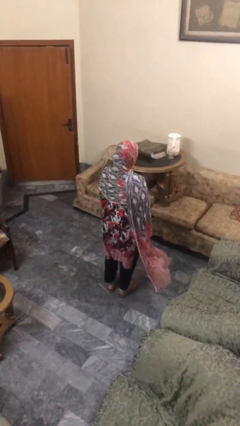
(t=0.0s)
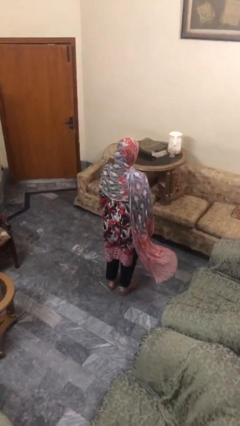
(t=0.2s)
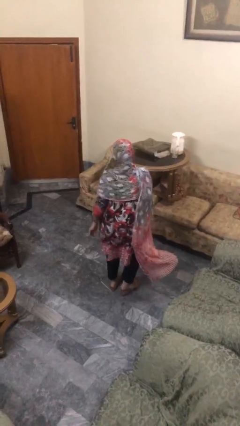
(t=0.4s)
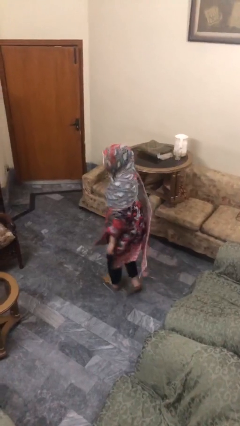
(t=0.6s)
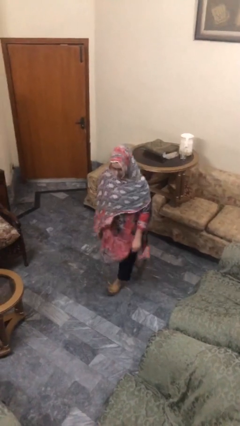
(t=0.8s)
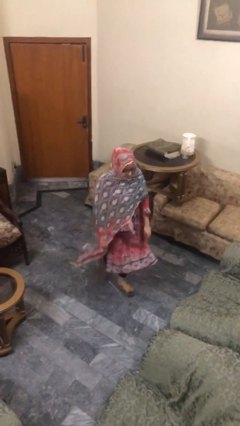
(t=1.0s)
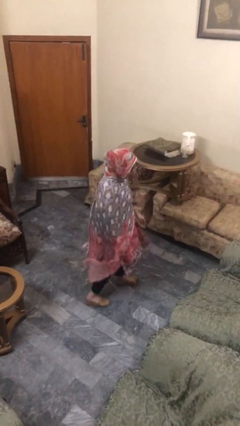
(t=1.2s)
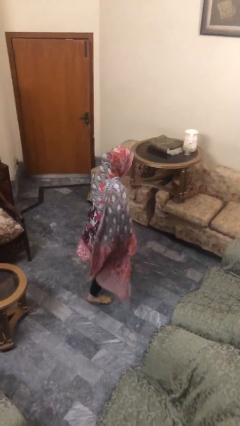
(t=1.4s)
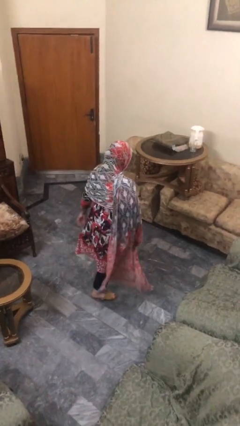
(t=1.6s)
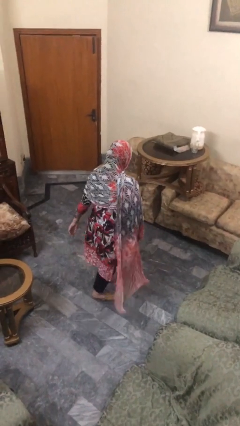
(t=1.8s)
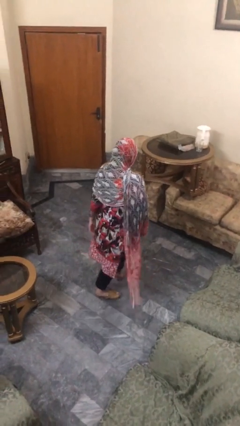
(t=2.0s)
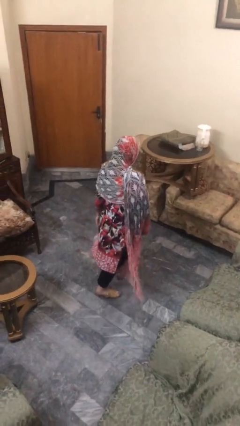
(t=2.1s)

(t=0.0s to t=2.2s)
person twirls

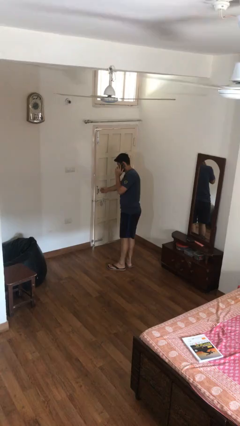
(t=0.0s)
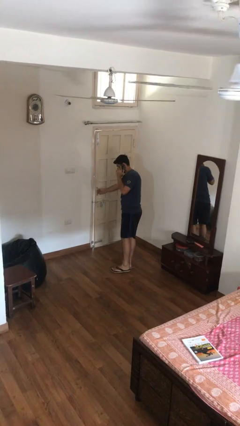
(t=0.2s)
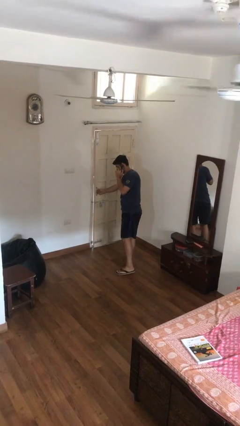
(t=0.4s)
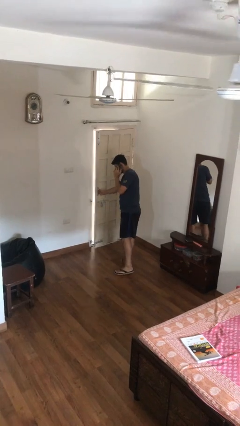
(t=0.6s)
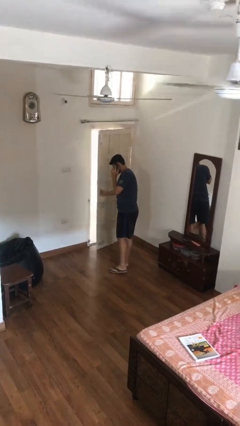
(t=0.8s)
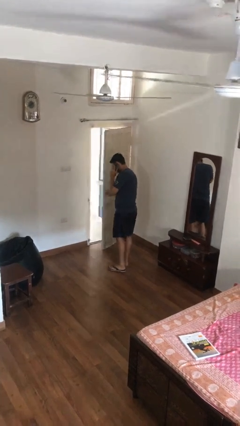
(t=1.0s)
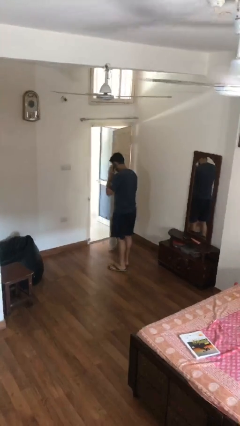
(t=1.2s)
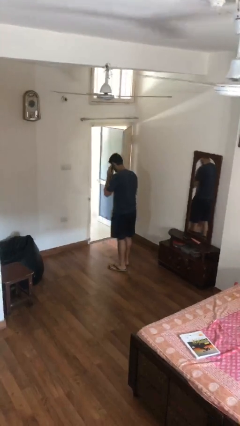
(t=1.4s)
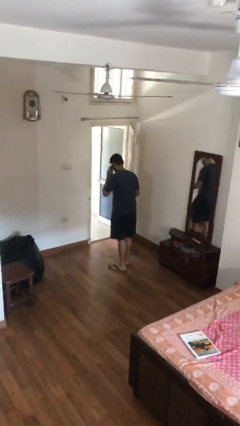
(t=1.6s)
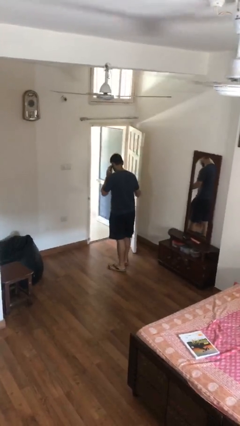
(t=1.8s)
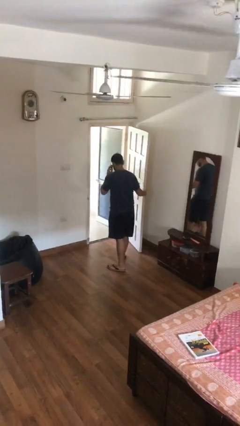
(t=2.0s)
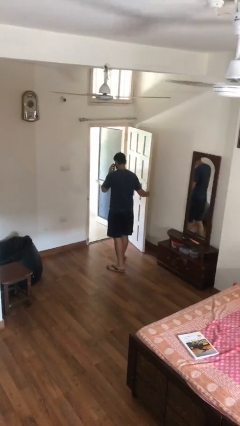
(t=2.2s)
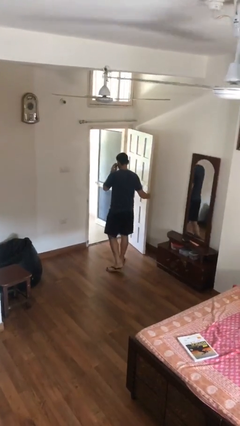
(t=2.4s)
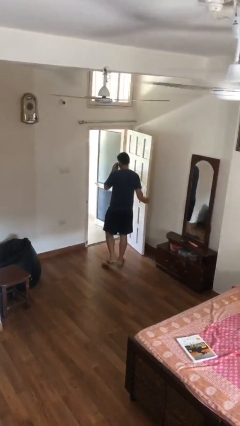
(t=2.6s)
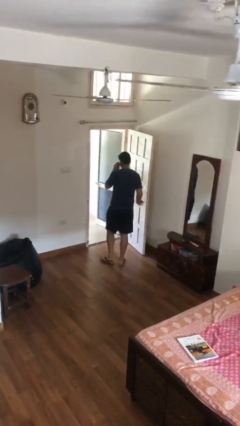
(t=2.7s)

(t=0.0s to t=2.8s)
person opens facility door

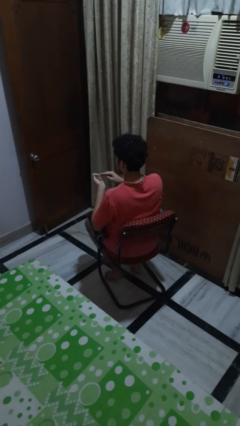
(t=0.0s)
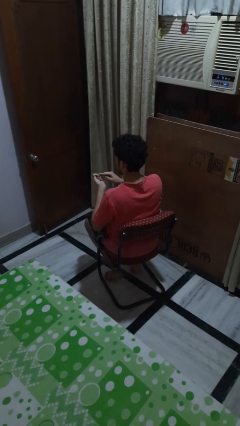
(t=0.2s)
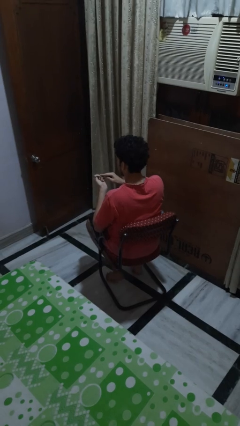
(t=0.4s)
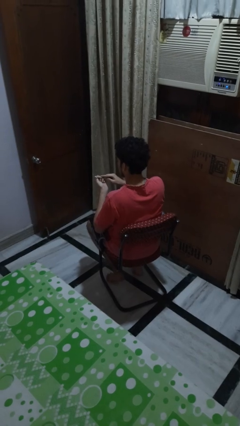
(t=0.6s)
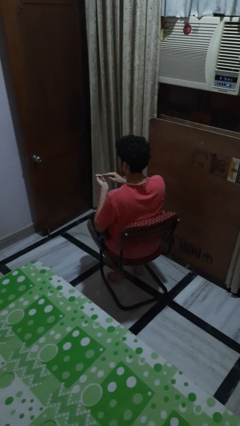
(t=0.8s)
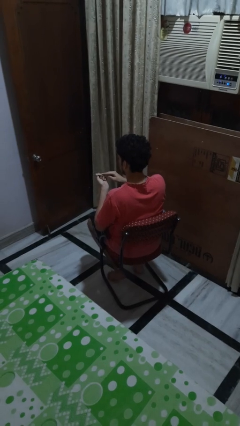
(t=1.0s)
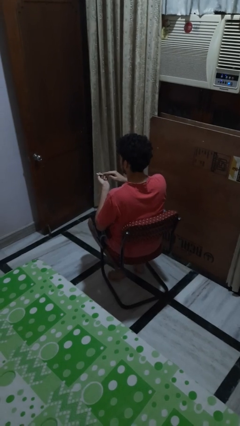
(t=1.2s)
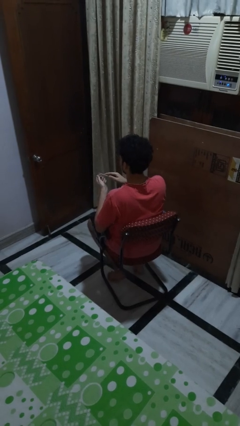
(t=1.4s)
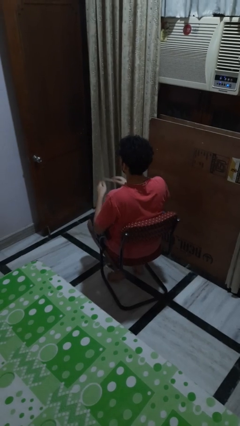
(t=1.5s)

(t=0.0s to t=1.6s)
person files fingernails

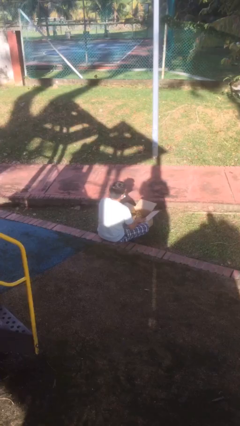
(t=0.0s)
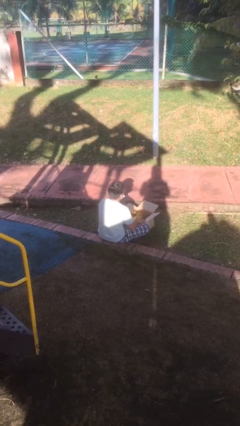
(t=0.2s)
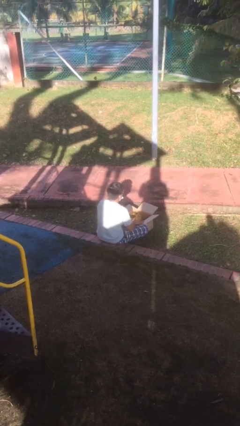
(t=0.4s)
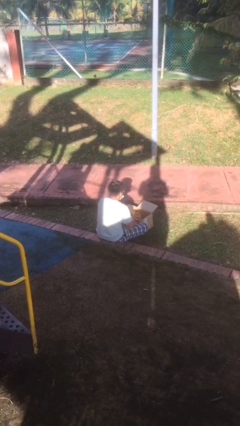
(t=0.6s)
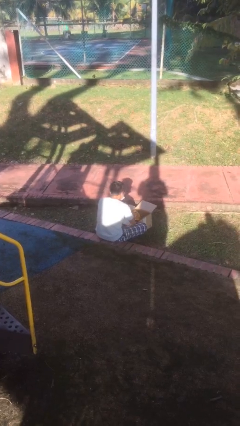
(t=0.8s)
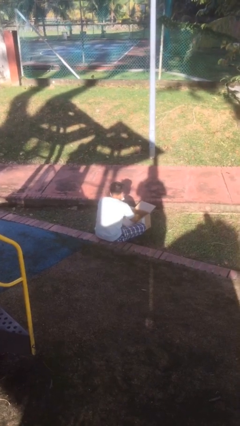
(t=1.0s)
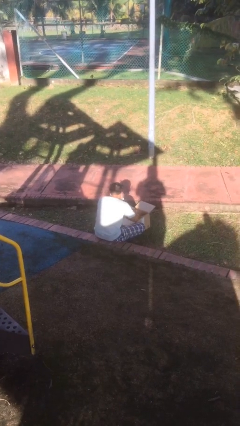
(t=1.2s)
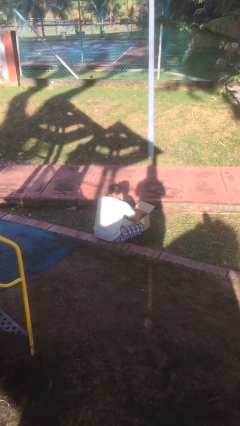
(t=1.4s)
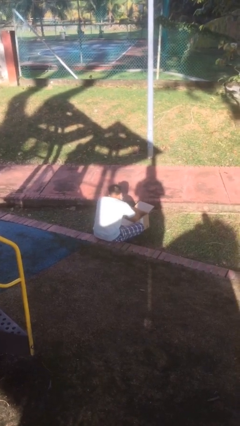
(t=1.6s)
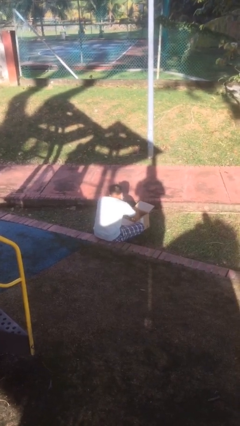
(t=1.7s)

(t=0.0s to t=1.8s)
person searches in box

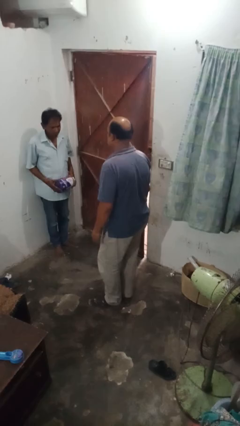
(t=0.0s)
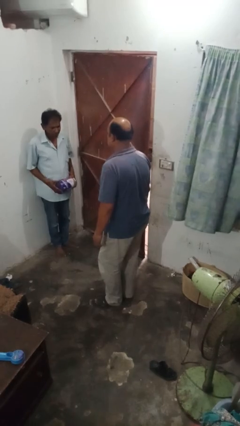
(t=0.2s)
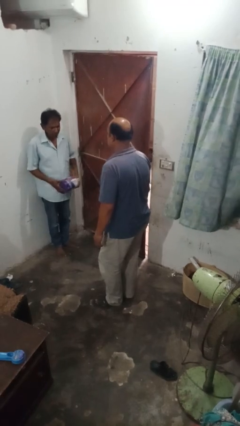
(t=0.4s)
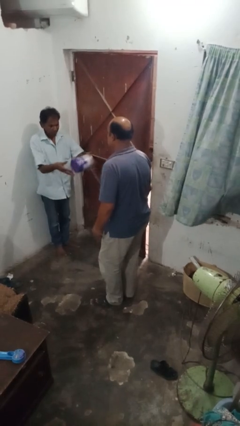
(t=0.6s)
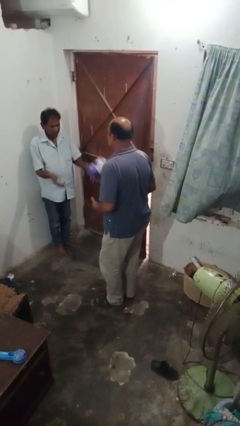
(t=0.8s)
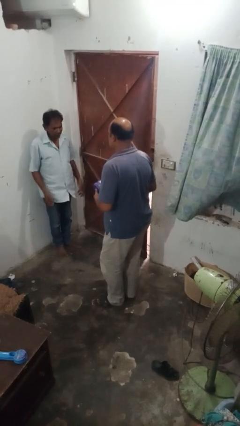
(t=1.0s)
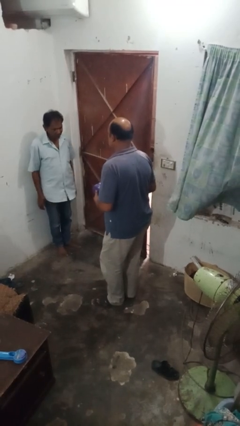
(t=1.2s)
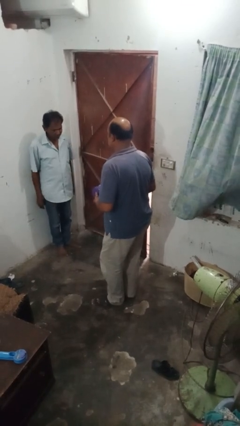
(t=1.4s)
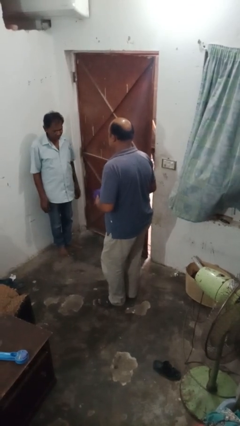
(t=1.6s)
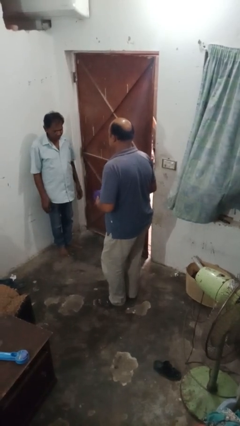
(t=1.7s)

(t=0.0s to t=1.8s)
person catches object from person

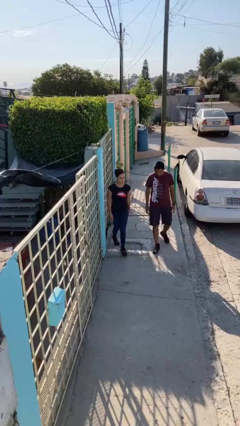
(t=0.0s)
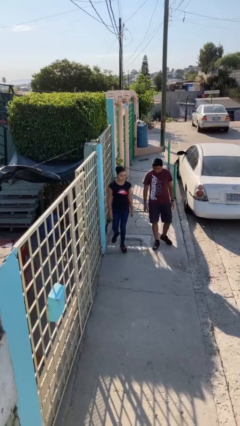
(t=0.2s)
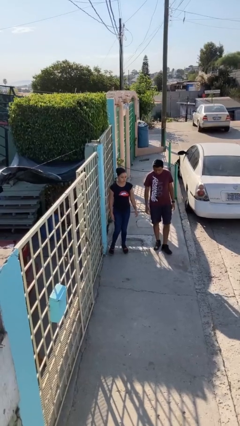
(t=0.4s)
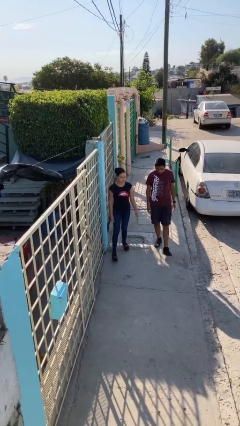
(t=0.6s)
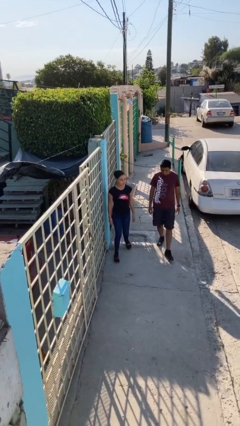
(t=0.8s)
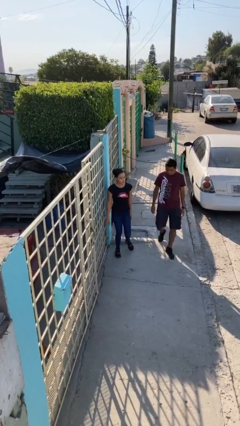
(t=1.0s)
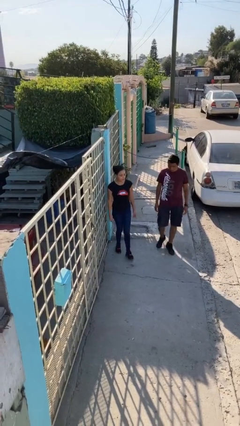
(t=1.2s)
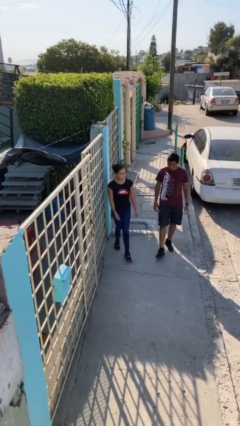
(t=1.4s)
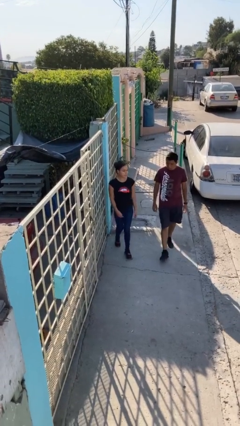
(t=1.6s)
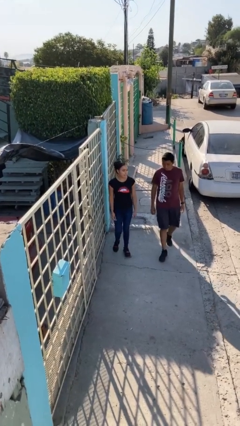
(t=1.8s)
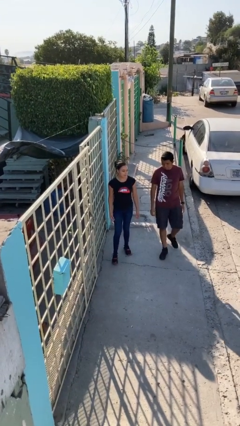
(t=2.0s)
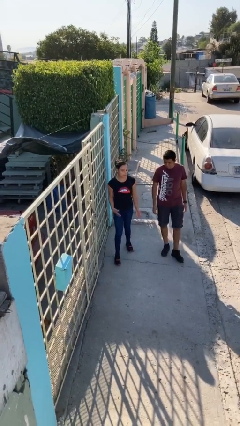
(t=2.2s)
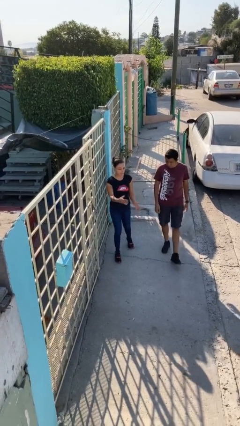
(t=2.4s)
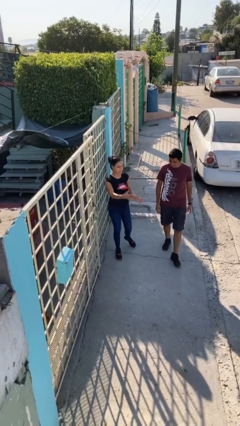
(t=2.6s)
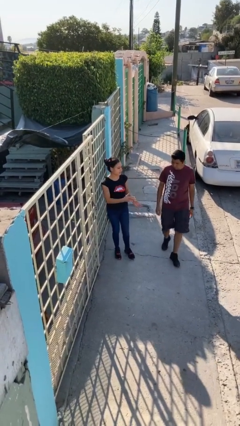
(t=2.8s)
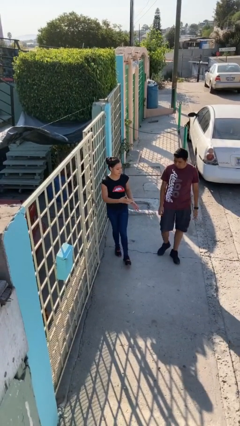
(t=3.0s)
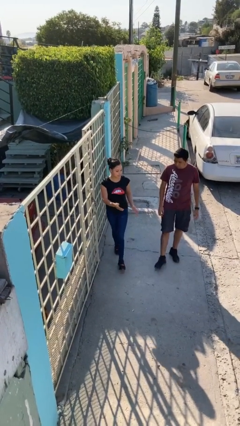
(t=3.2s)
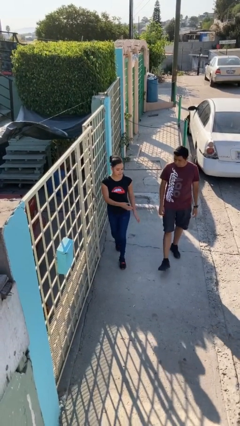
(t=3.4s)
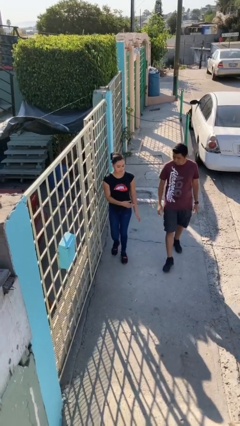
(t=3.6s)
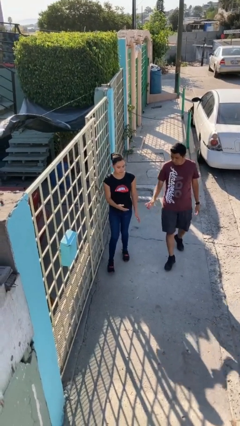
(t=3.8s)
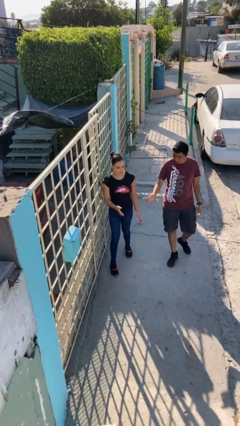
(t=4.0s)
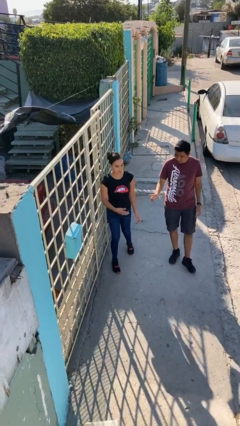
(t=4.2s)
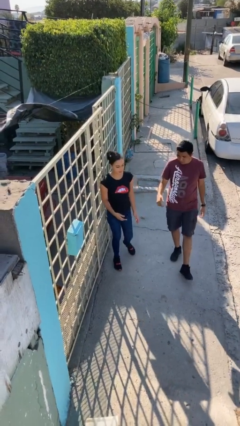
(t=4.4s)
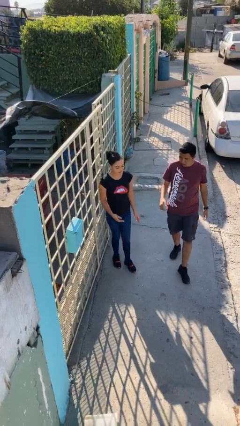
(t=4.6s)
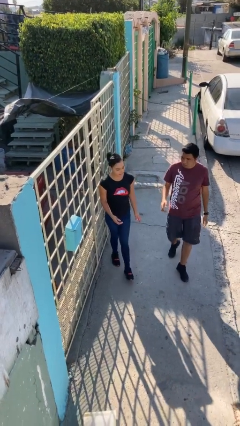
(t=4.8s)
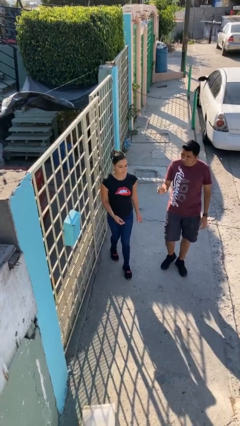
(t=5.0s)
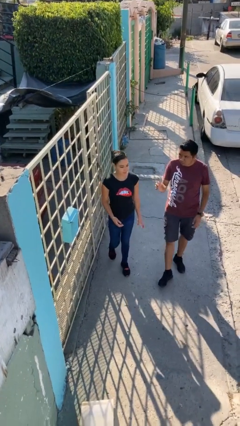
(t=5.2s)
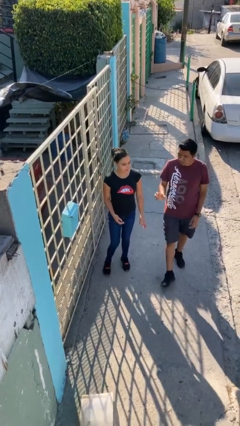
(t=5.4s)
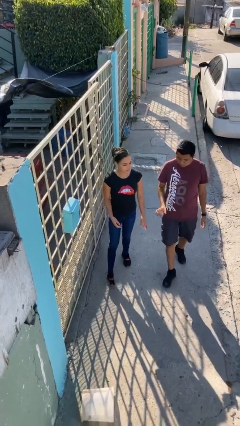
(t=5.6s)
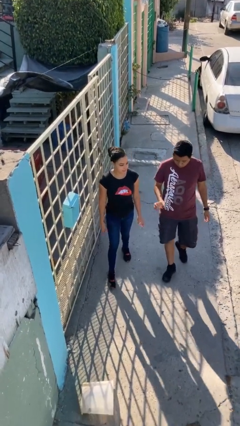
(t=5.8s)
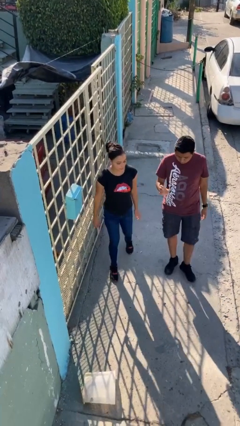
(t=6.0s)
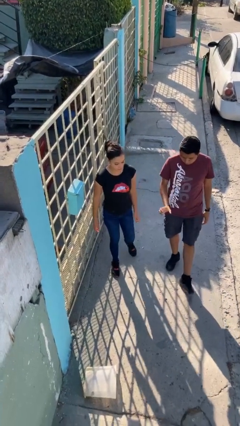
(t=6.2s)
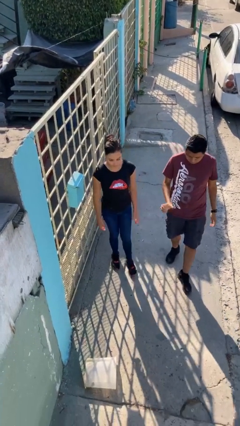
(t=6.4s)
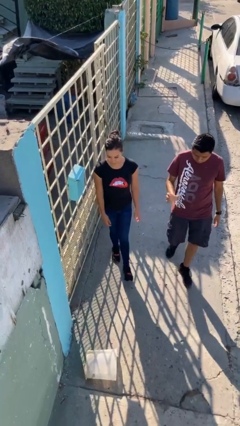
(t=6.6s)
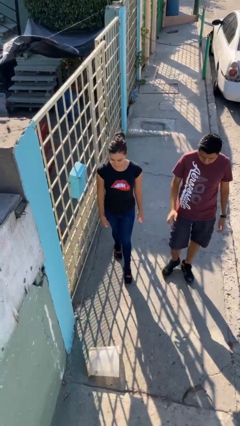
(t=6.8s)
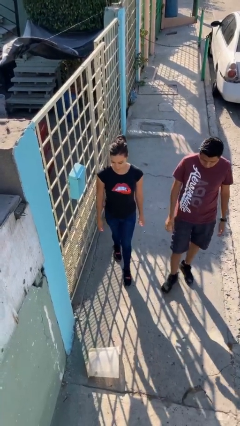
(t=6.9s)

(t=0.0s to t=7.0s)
person talks to person
